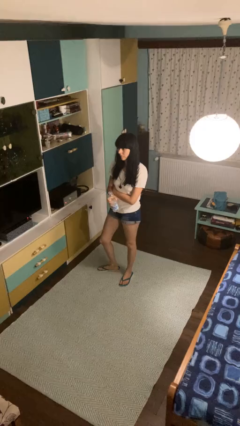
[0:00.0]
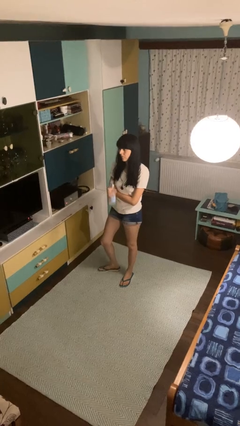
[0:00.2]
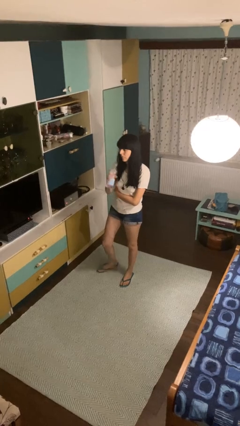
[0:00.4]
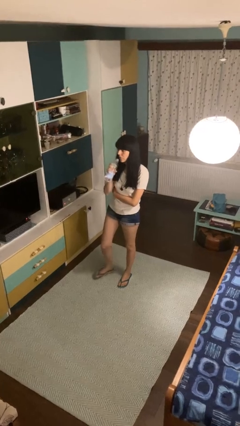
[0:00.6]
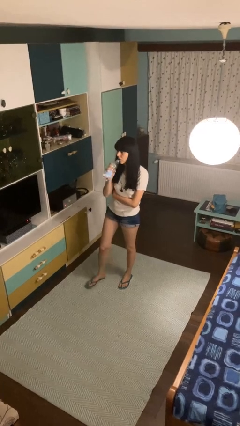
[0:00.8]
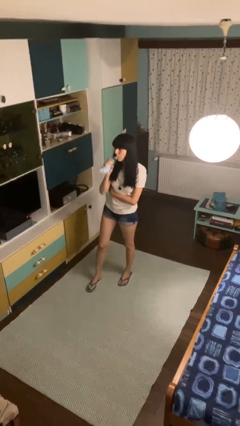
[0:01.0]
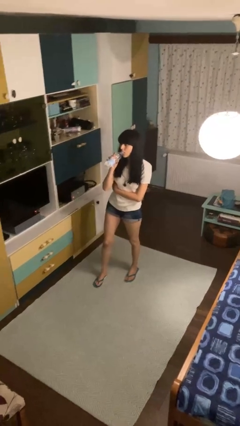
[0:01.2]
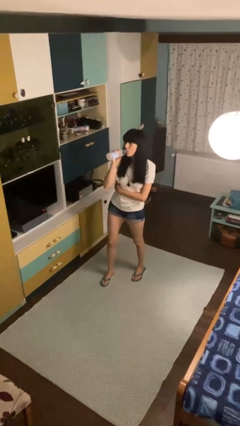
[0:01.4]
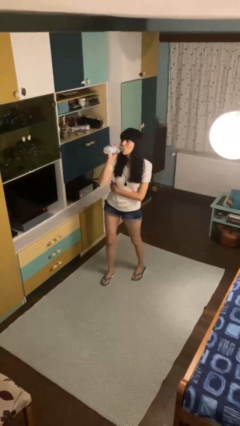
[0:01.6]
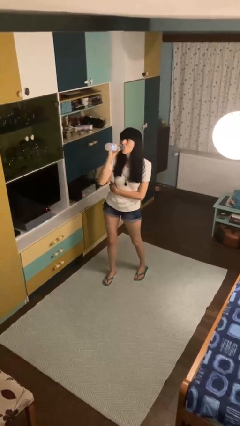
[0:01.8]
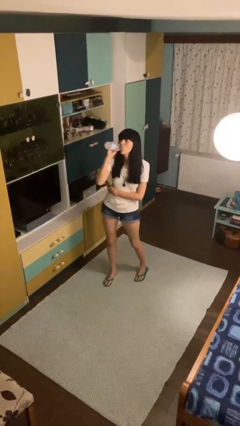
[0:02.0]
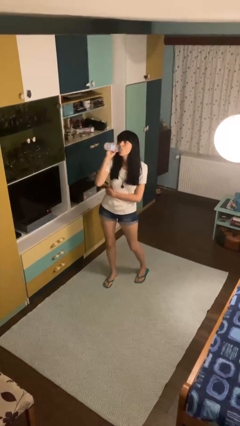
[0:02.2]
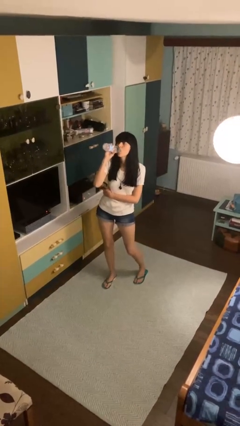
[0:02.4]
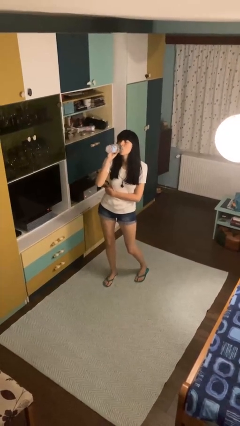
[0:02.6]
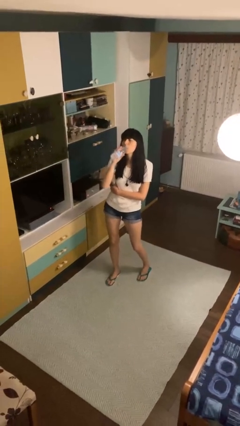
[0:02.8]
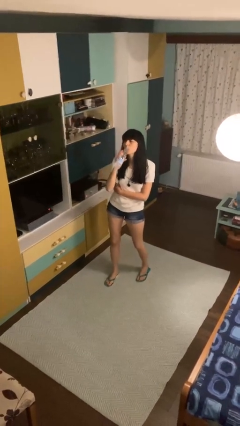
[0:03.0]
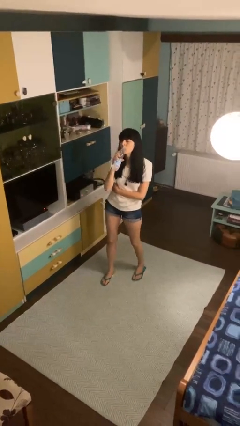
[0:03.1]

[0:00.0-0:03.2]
person drinks from bottle

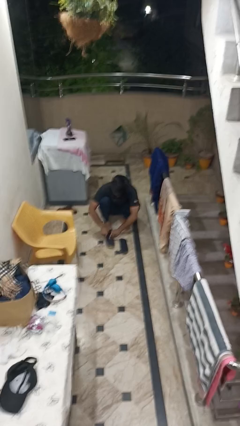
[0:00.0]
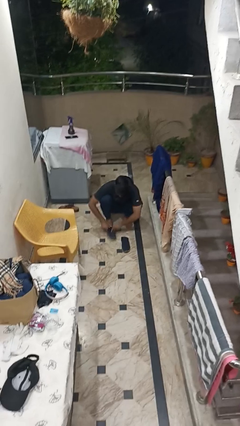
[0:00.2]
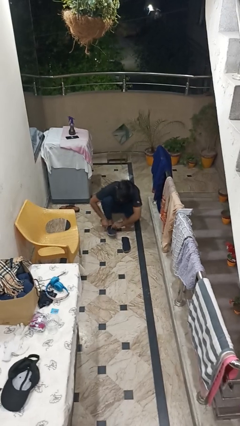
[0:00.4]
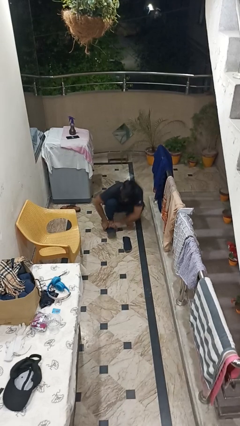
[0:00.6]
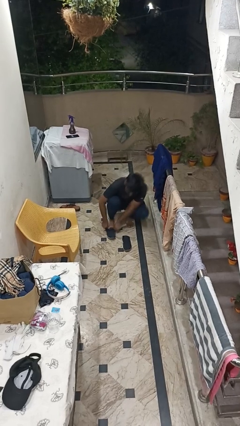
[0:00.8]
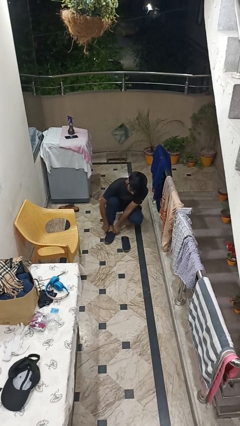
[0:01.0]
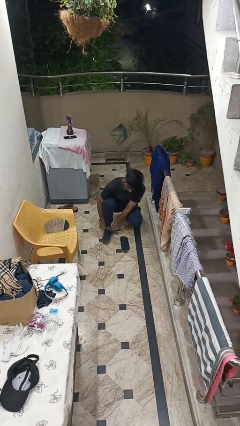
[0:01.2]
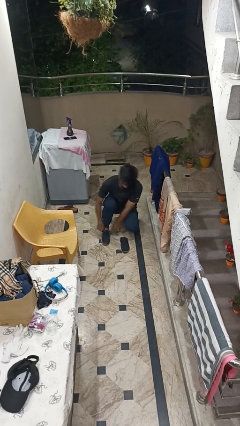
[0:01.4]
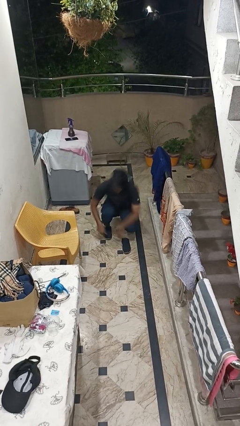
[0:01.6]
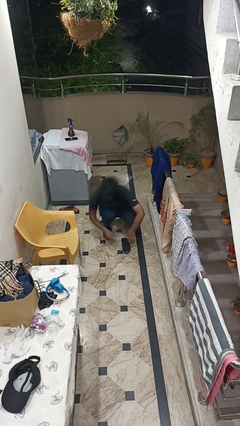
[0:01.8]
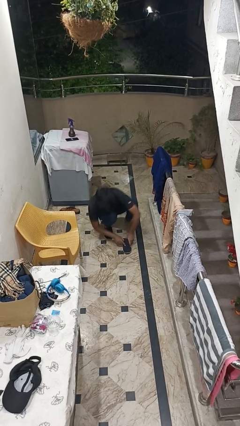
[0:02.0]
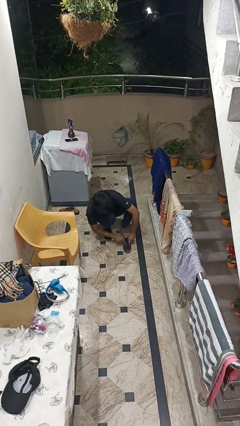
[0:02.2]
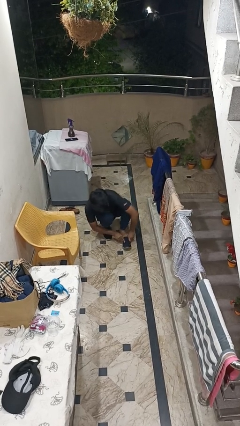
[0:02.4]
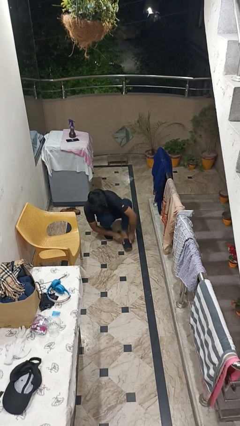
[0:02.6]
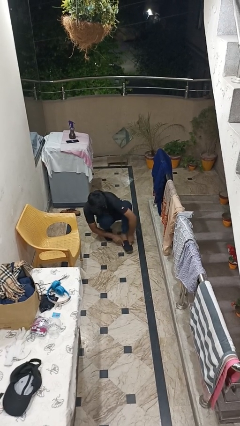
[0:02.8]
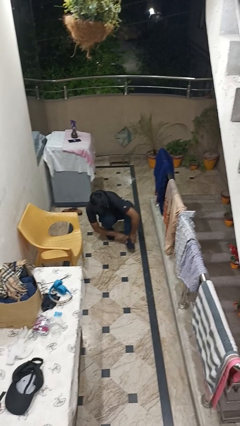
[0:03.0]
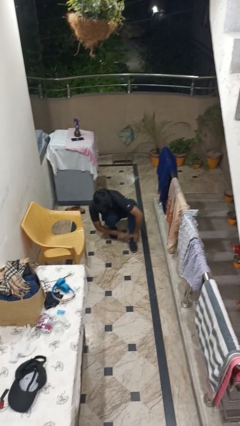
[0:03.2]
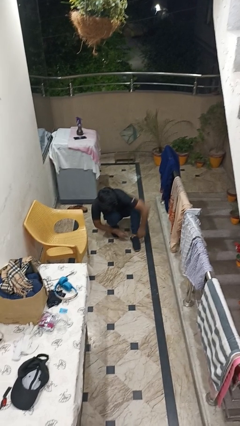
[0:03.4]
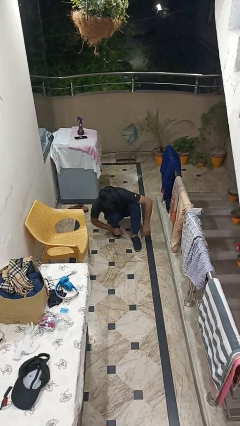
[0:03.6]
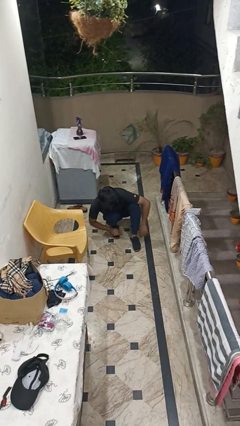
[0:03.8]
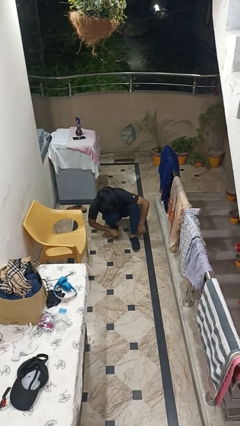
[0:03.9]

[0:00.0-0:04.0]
person puts on shoes

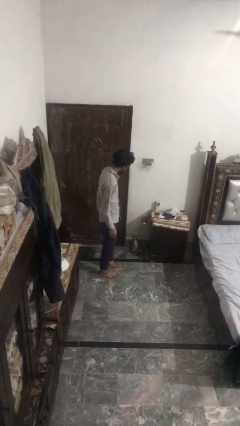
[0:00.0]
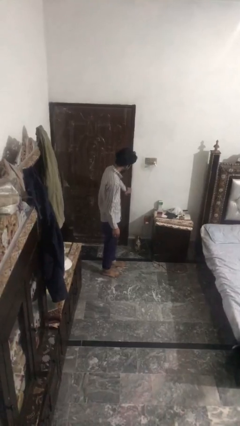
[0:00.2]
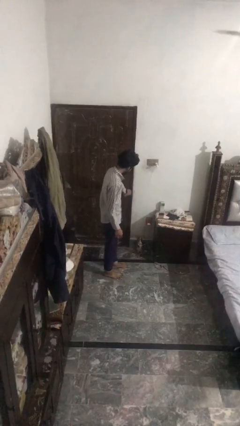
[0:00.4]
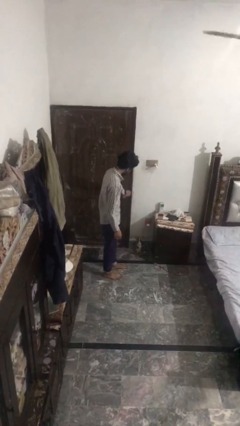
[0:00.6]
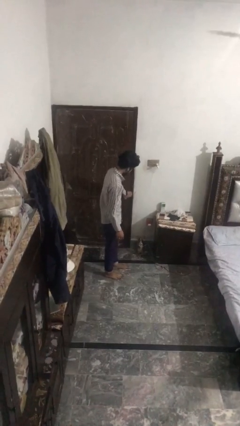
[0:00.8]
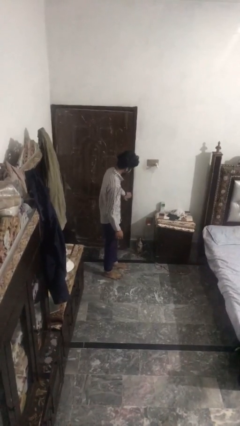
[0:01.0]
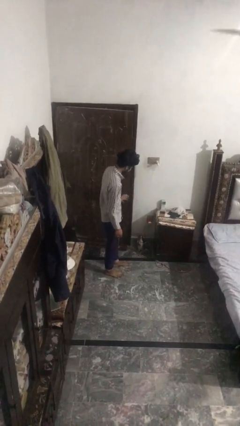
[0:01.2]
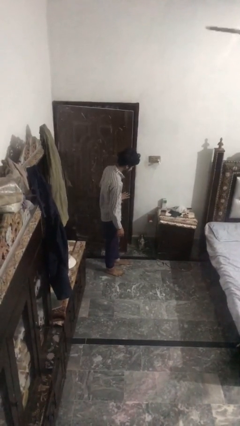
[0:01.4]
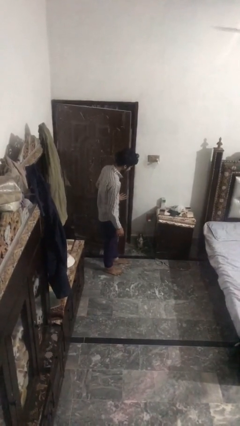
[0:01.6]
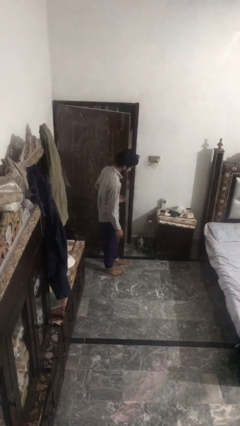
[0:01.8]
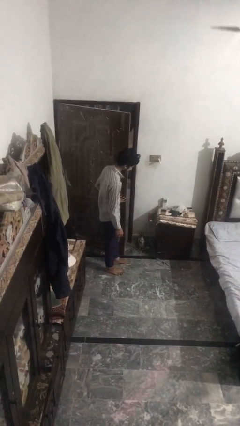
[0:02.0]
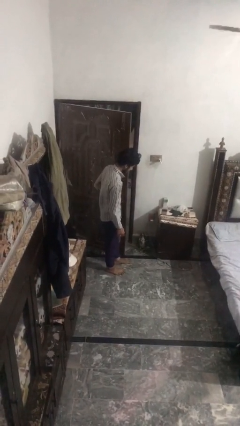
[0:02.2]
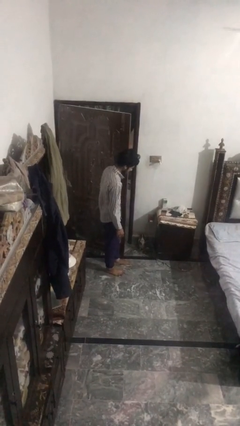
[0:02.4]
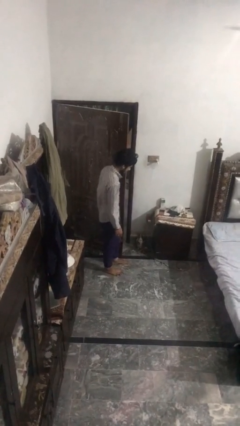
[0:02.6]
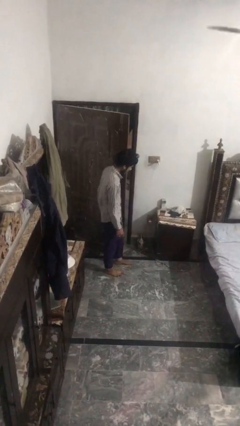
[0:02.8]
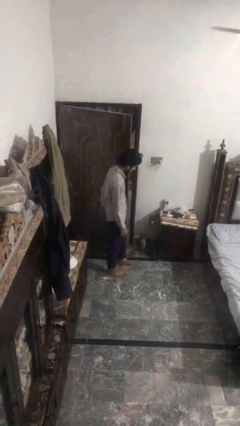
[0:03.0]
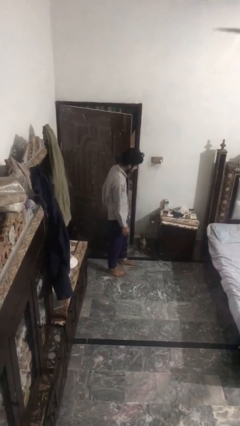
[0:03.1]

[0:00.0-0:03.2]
person opens facility door

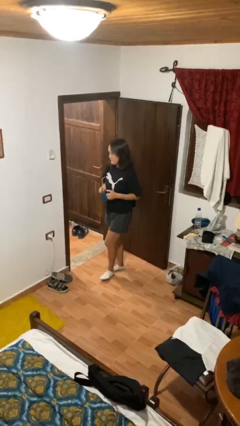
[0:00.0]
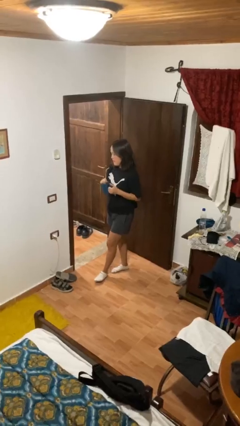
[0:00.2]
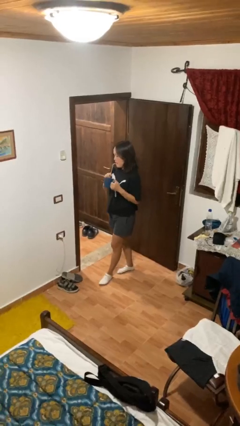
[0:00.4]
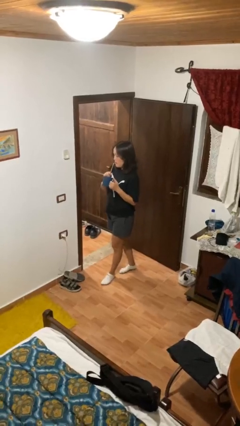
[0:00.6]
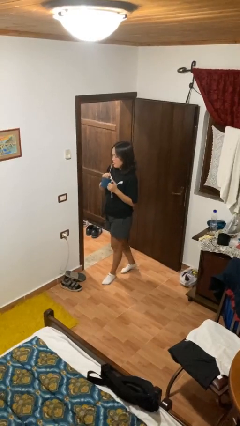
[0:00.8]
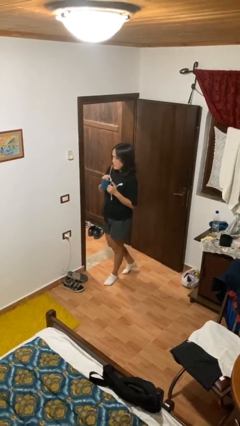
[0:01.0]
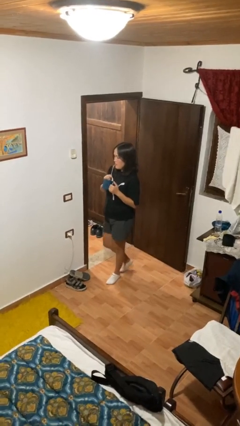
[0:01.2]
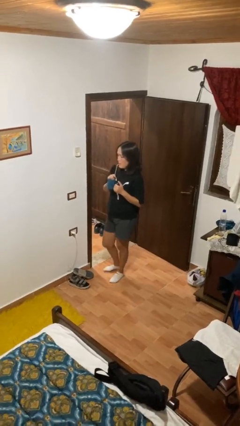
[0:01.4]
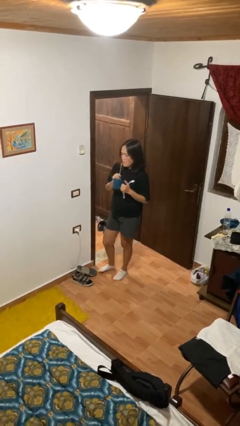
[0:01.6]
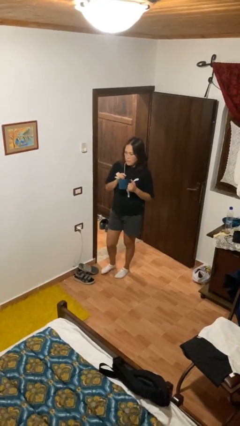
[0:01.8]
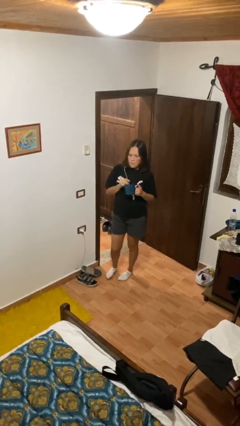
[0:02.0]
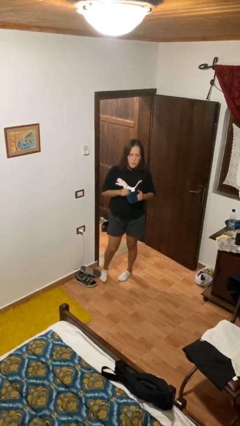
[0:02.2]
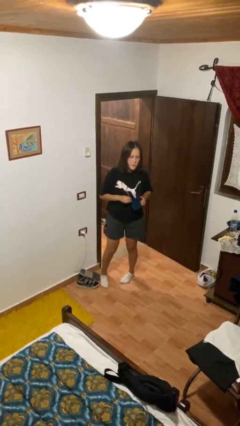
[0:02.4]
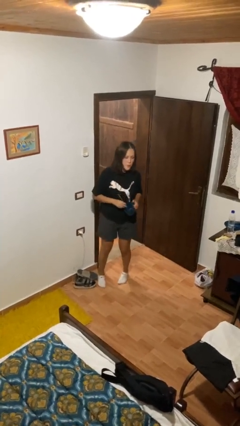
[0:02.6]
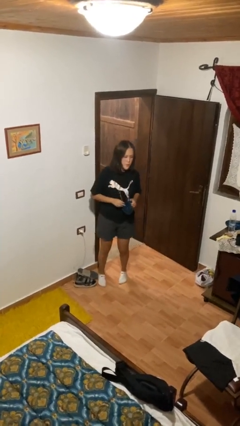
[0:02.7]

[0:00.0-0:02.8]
person drinks from straw

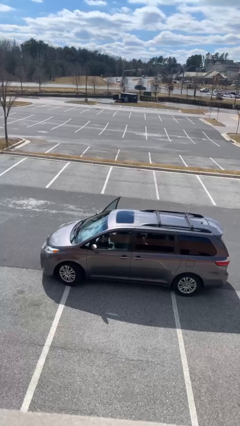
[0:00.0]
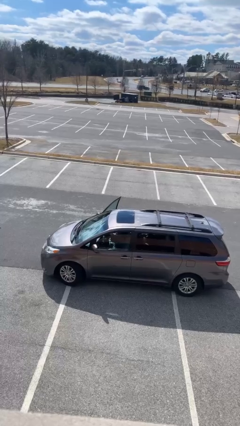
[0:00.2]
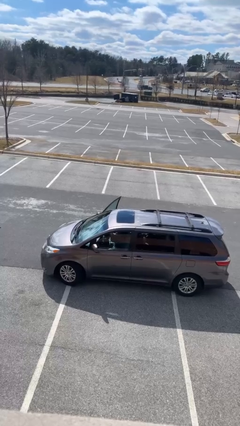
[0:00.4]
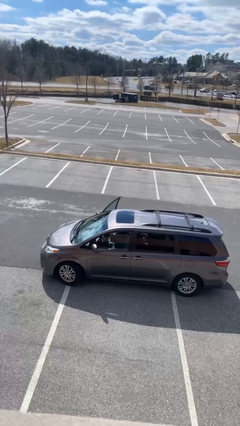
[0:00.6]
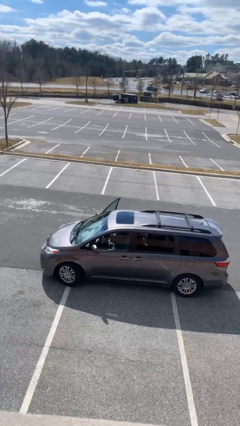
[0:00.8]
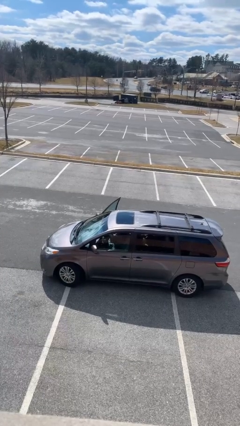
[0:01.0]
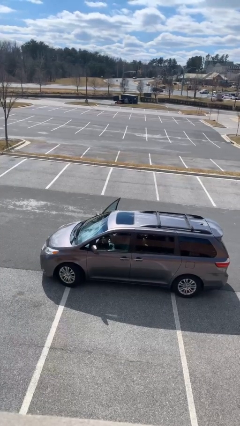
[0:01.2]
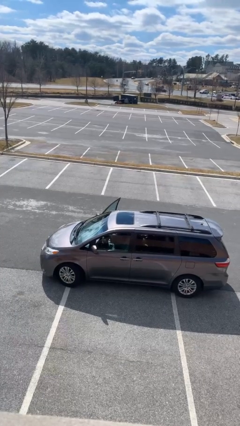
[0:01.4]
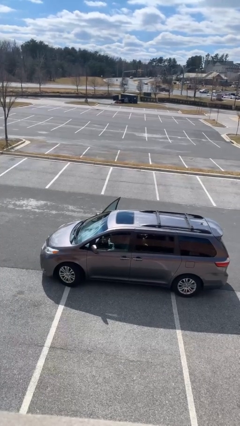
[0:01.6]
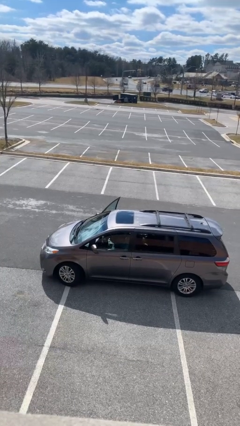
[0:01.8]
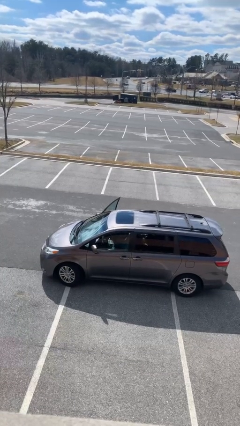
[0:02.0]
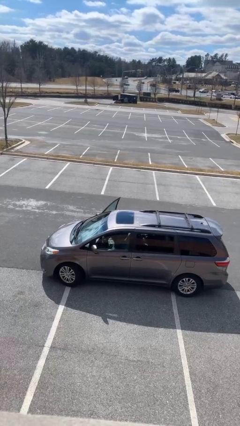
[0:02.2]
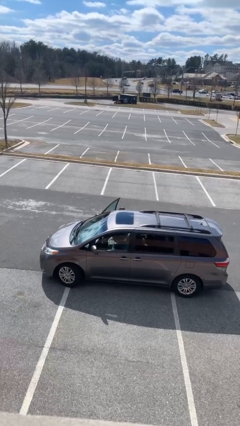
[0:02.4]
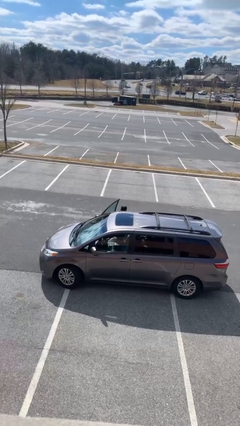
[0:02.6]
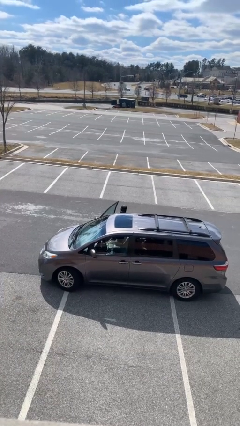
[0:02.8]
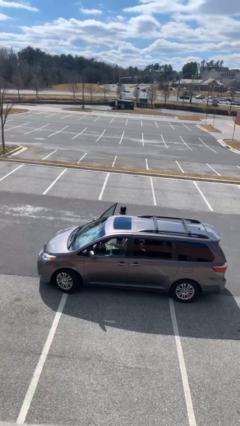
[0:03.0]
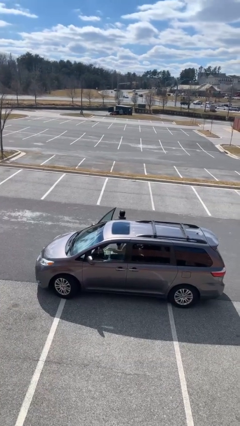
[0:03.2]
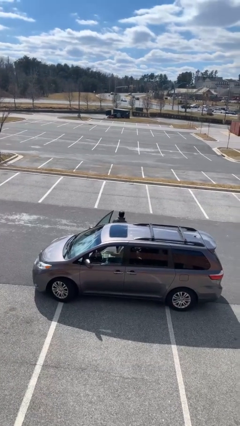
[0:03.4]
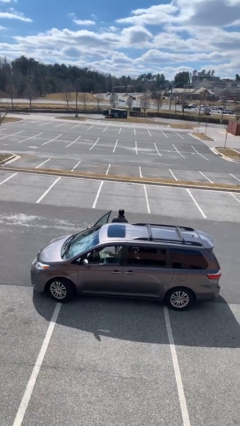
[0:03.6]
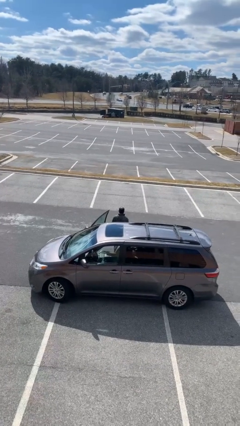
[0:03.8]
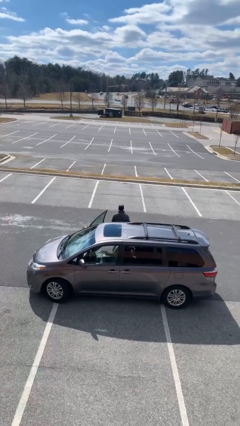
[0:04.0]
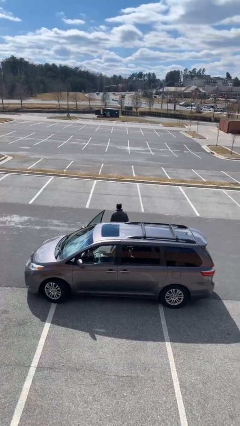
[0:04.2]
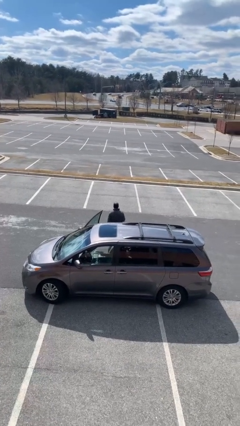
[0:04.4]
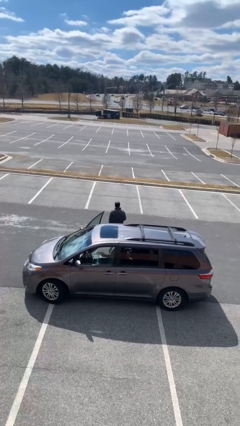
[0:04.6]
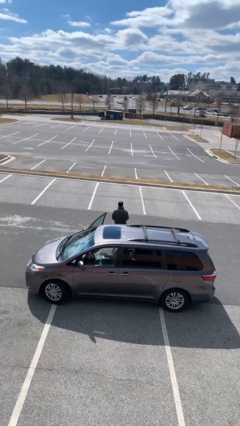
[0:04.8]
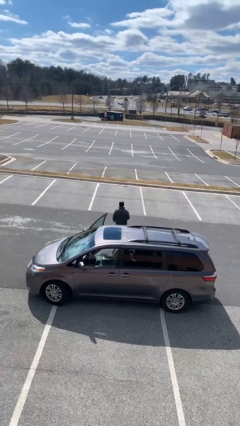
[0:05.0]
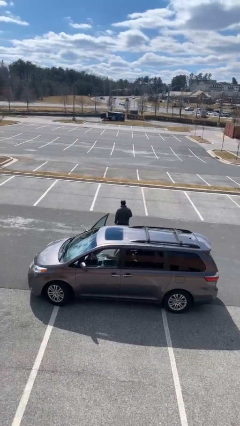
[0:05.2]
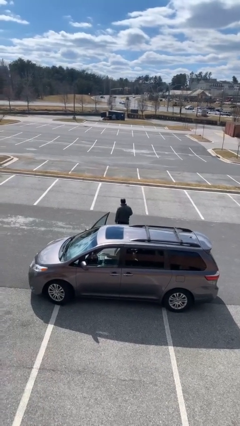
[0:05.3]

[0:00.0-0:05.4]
person exits car
